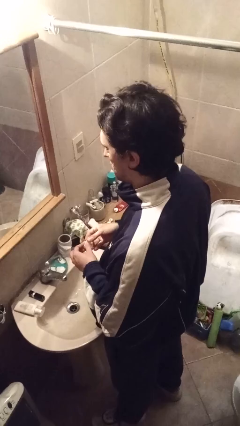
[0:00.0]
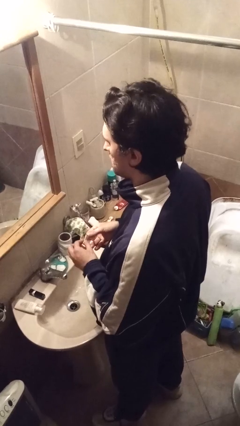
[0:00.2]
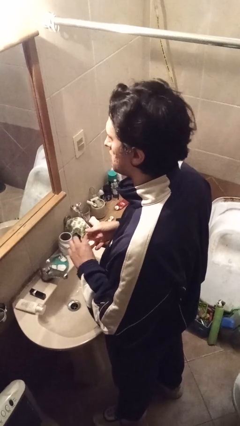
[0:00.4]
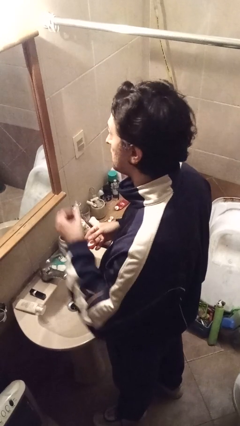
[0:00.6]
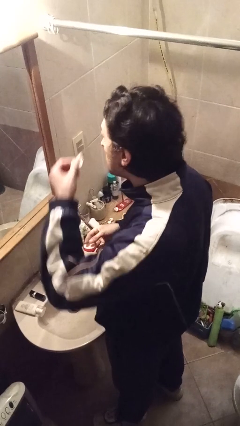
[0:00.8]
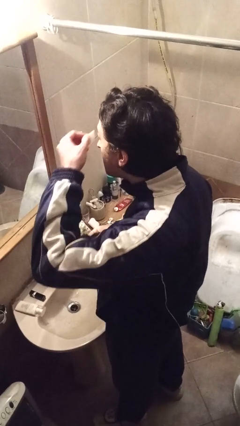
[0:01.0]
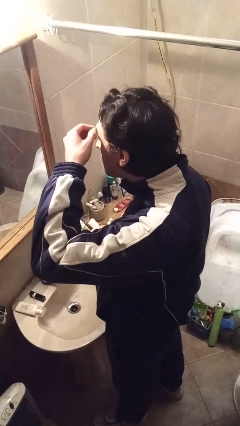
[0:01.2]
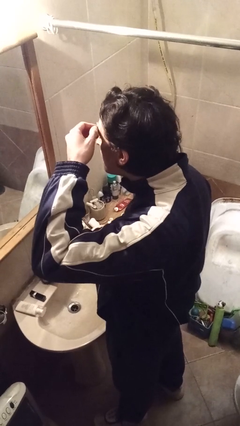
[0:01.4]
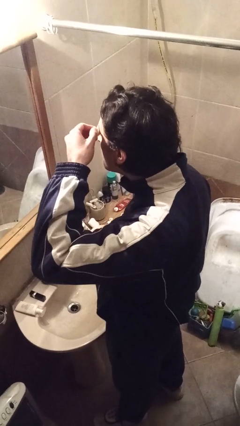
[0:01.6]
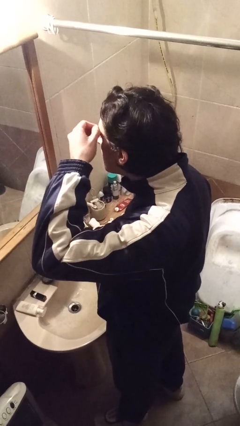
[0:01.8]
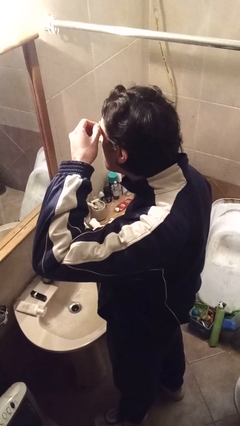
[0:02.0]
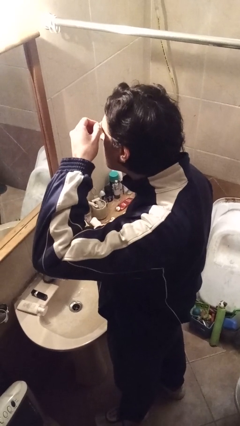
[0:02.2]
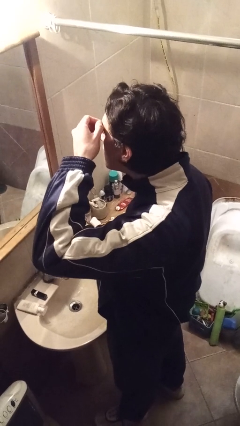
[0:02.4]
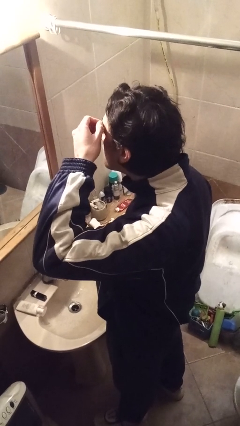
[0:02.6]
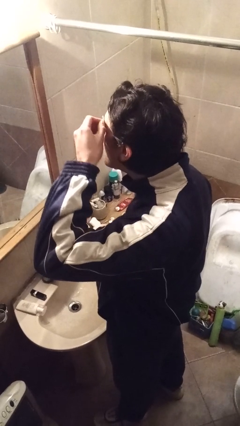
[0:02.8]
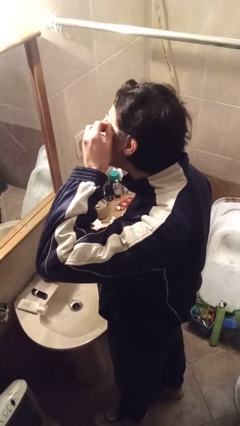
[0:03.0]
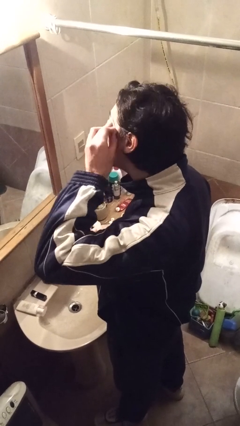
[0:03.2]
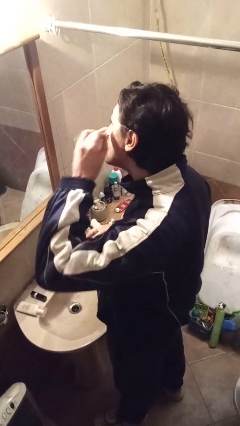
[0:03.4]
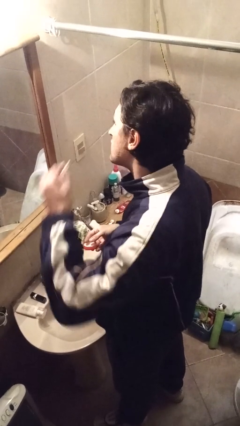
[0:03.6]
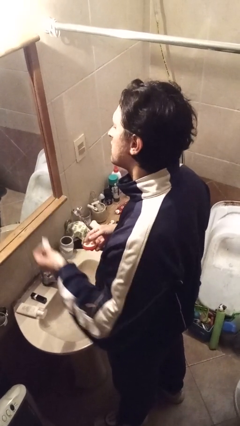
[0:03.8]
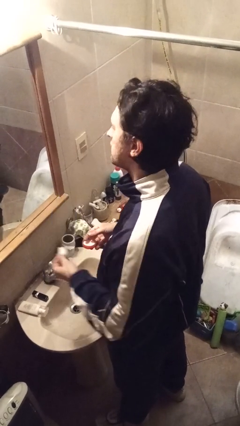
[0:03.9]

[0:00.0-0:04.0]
person applies eye makeup

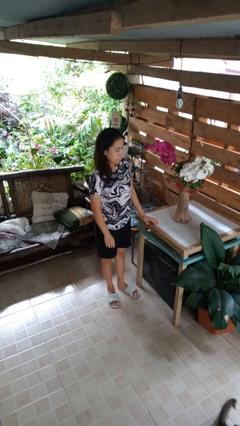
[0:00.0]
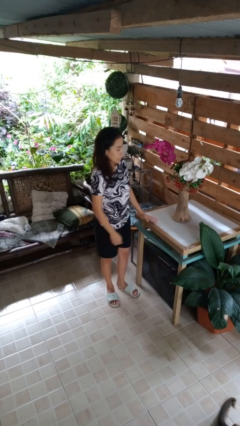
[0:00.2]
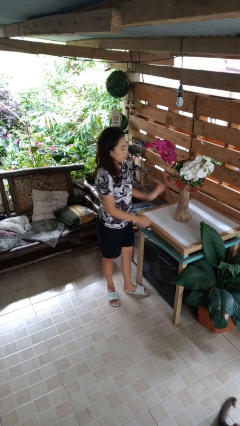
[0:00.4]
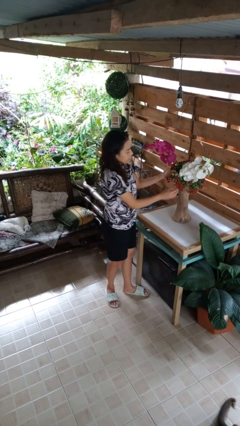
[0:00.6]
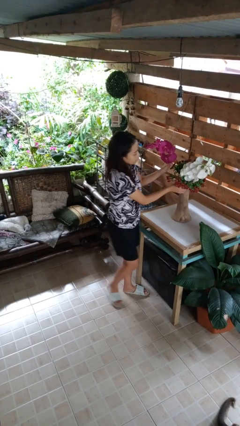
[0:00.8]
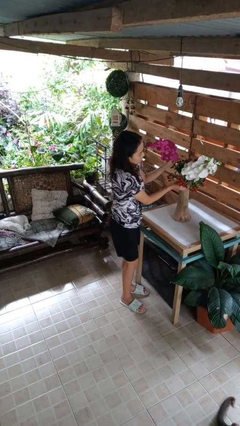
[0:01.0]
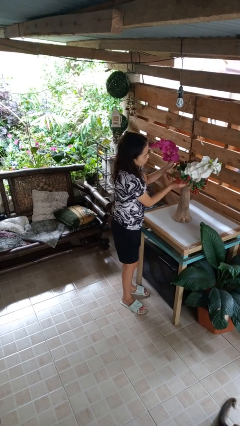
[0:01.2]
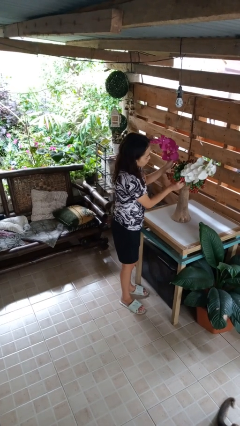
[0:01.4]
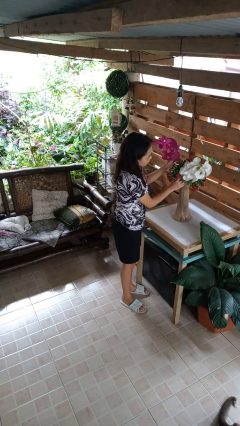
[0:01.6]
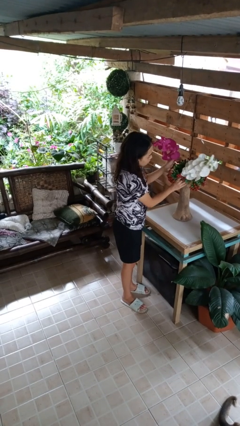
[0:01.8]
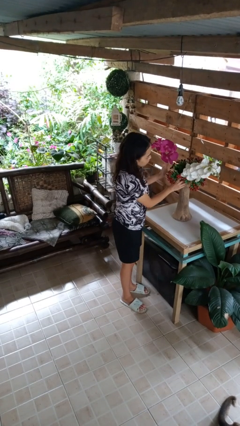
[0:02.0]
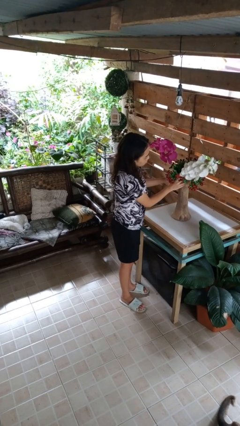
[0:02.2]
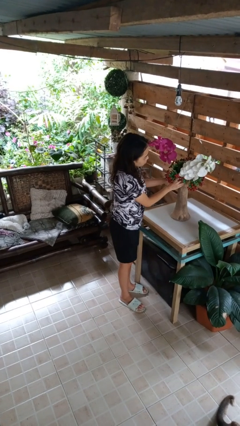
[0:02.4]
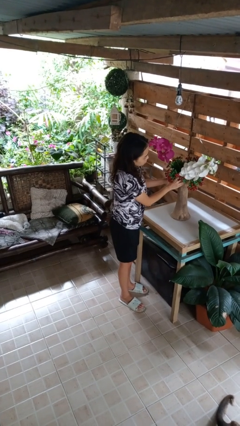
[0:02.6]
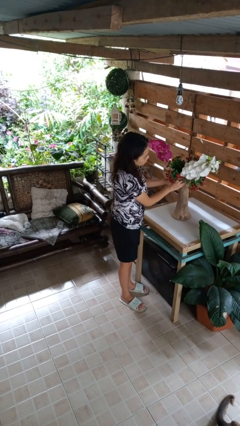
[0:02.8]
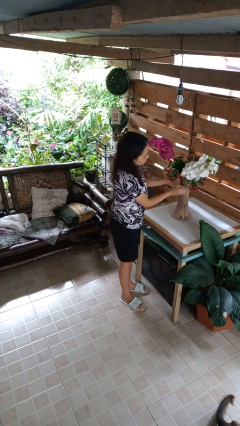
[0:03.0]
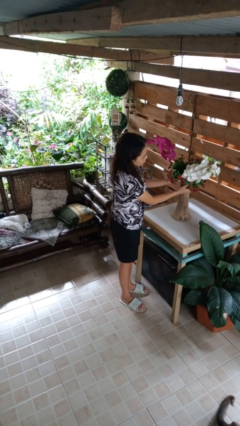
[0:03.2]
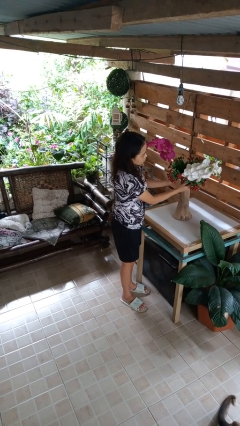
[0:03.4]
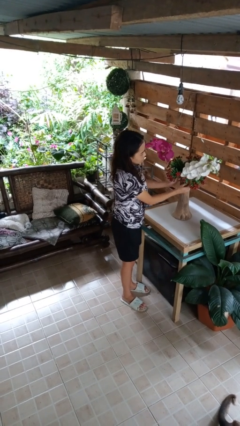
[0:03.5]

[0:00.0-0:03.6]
person arranges flowers in vase

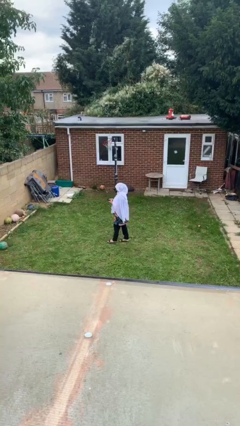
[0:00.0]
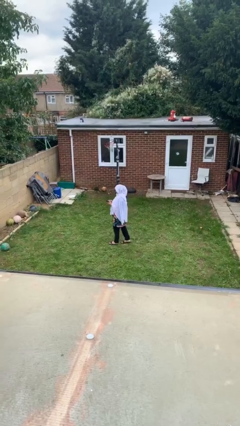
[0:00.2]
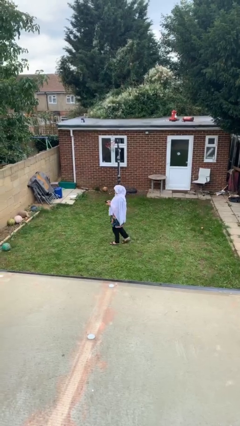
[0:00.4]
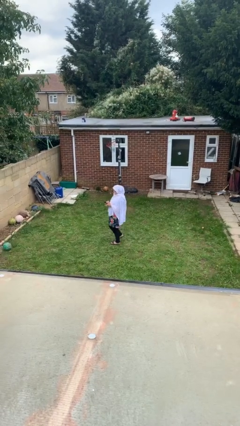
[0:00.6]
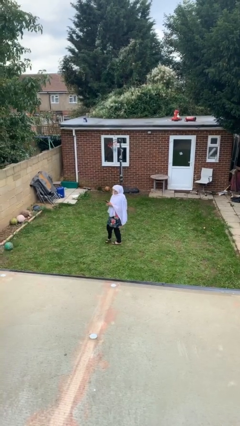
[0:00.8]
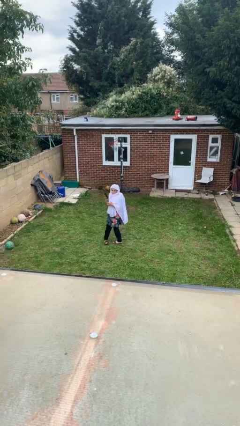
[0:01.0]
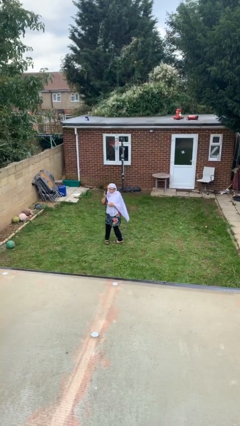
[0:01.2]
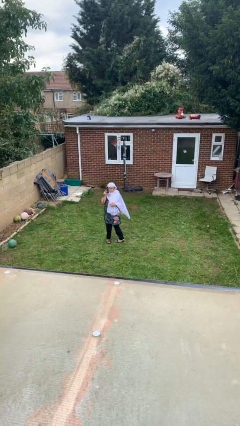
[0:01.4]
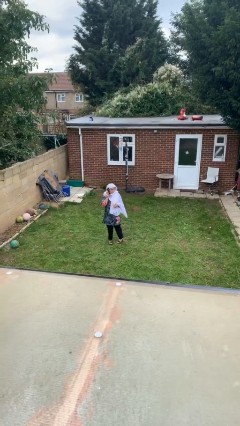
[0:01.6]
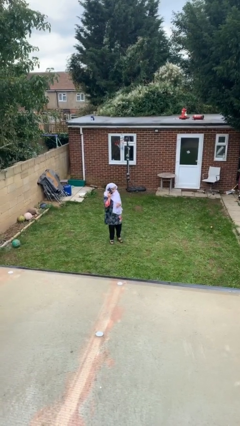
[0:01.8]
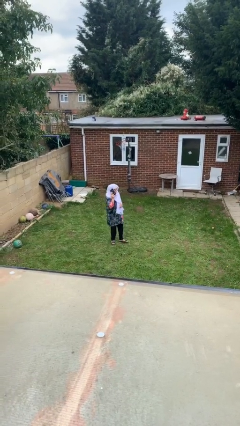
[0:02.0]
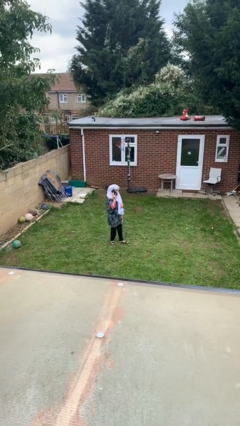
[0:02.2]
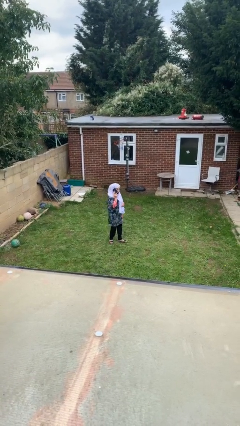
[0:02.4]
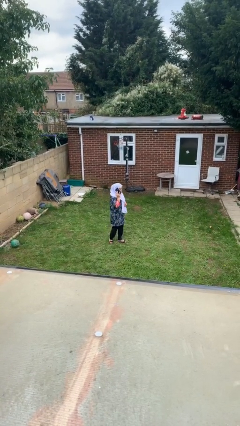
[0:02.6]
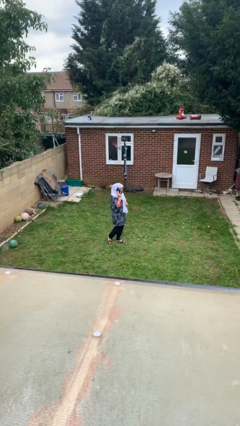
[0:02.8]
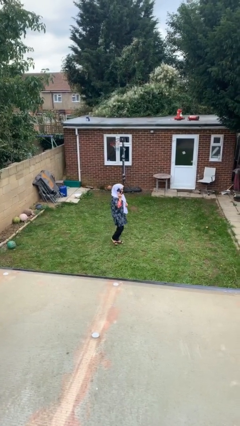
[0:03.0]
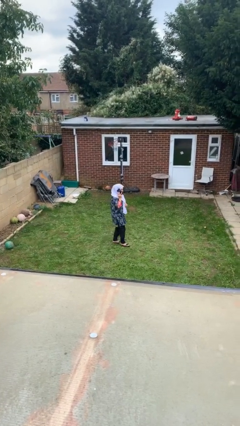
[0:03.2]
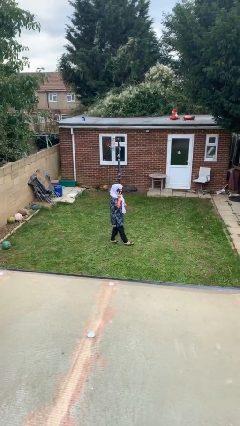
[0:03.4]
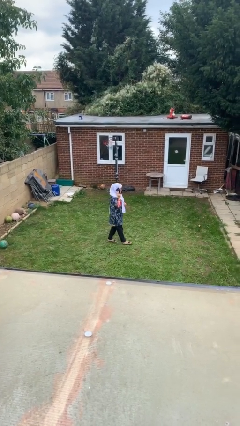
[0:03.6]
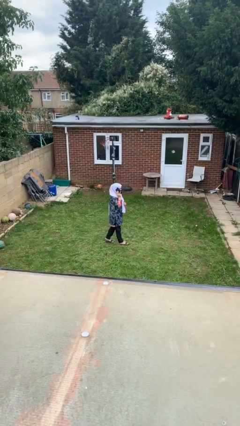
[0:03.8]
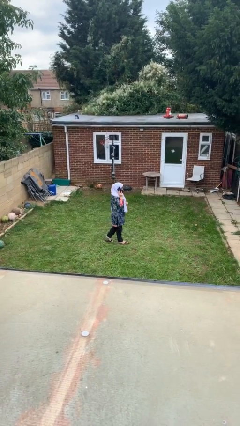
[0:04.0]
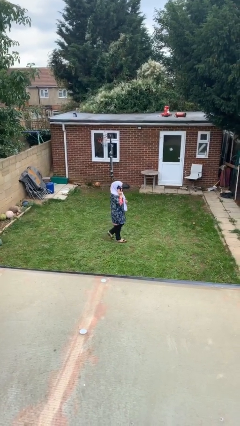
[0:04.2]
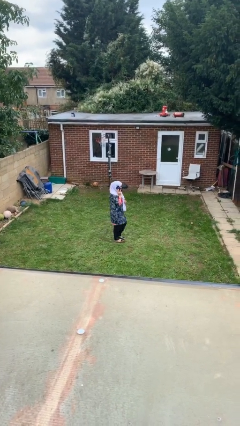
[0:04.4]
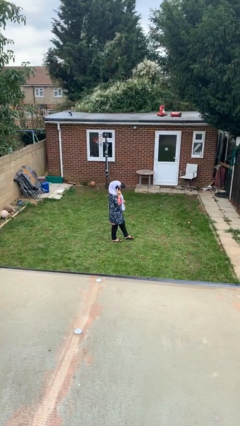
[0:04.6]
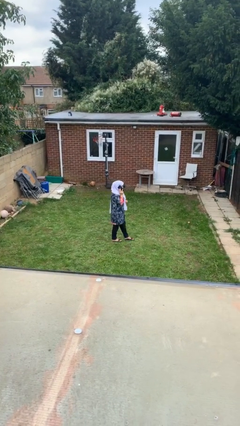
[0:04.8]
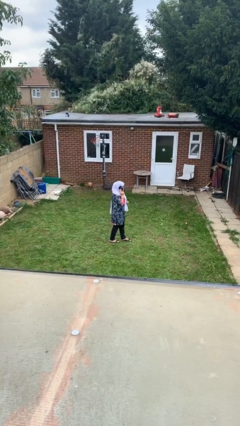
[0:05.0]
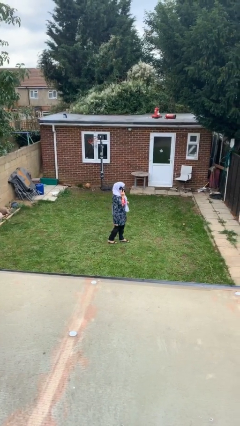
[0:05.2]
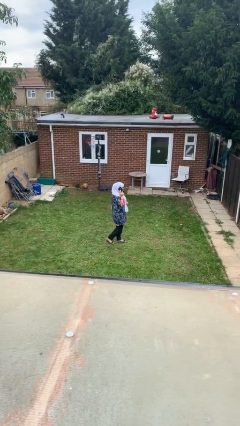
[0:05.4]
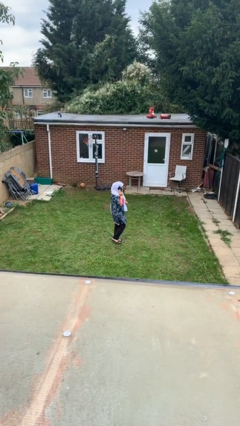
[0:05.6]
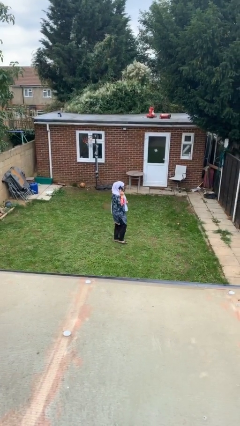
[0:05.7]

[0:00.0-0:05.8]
person talks on phone

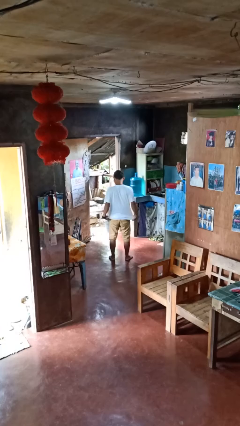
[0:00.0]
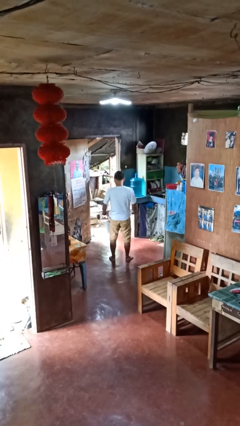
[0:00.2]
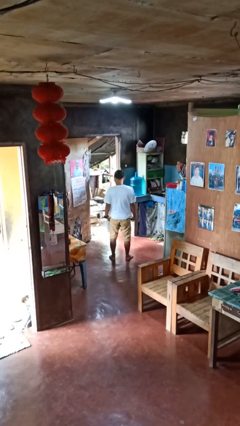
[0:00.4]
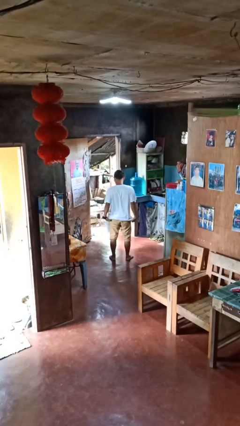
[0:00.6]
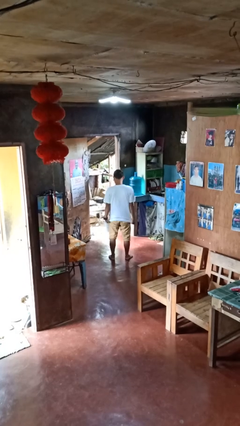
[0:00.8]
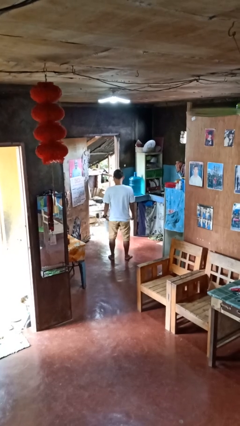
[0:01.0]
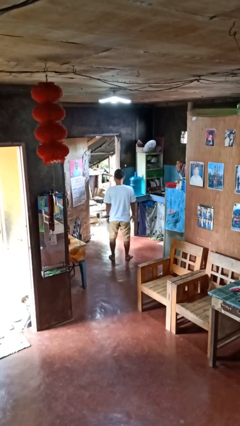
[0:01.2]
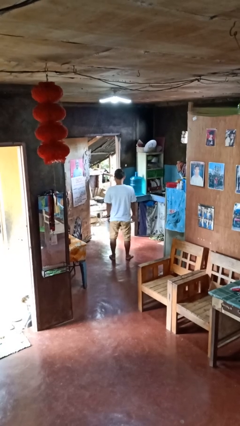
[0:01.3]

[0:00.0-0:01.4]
person untucks shirt

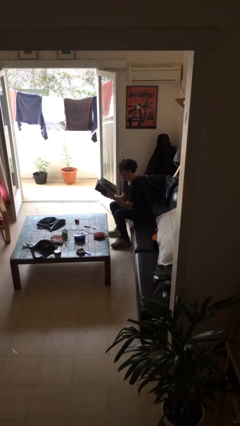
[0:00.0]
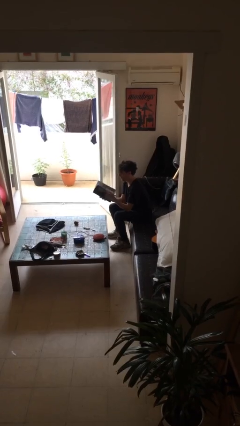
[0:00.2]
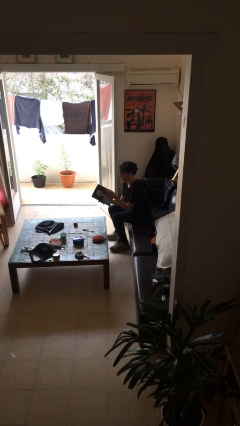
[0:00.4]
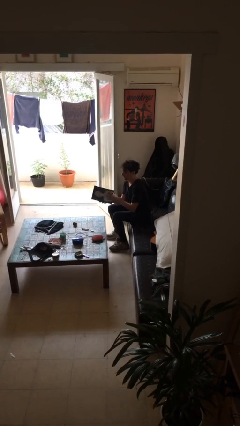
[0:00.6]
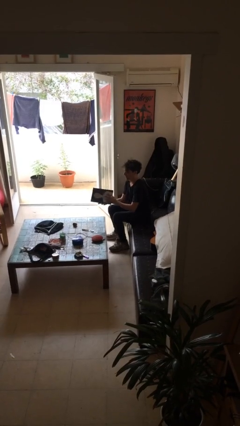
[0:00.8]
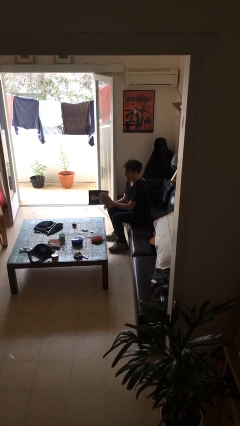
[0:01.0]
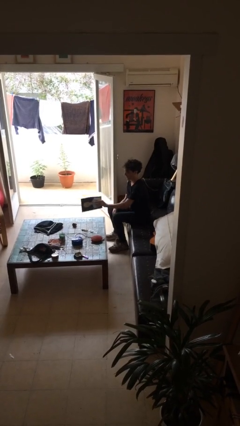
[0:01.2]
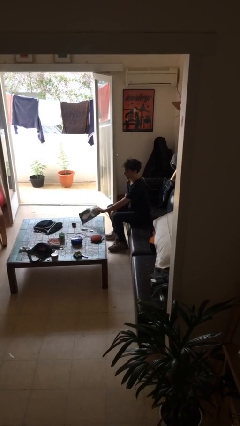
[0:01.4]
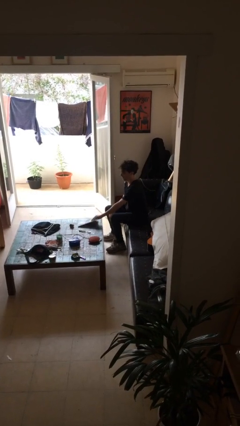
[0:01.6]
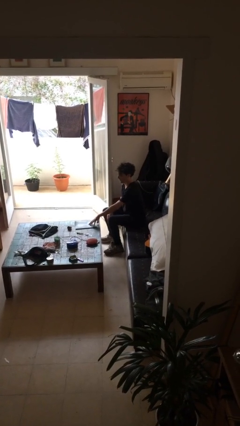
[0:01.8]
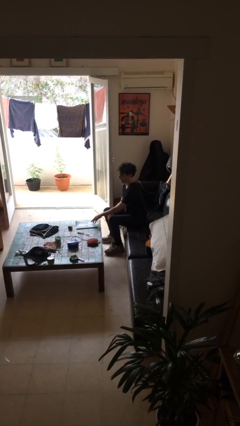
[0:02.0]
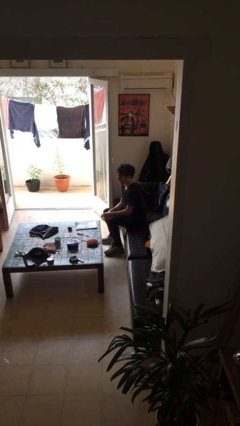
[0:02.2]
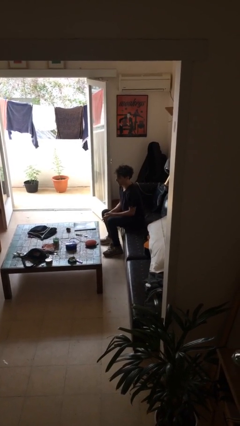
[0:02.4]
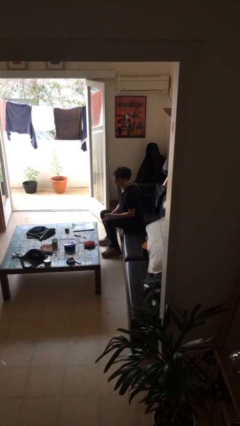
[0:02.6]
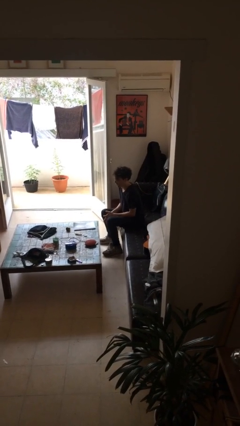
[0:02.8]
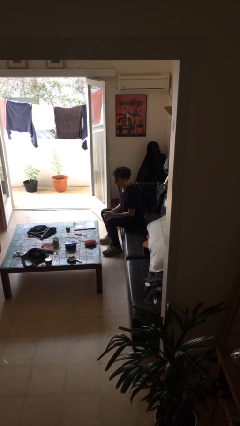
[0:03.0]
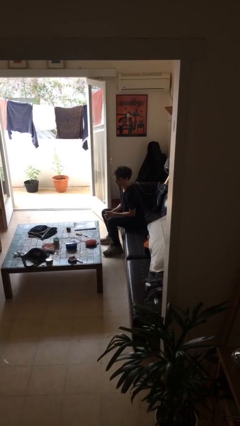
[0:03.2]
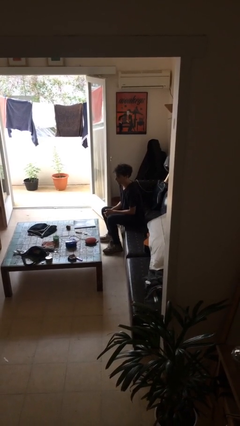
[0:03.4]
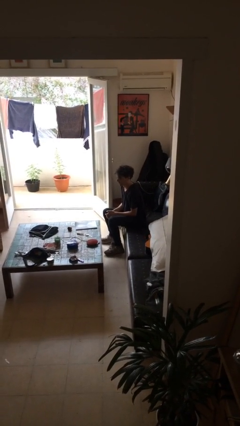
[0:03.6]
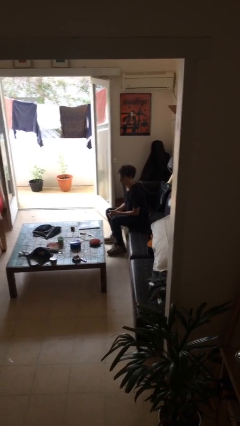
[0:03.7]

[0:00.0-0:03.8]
person puts down object on table
